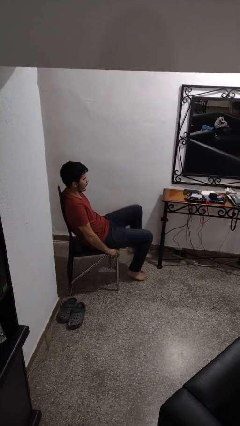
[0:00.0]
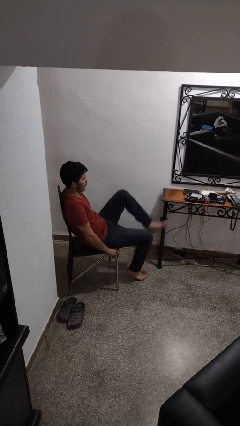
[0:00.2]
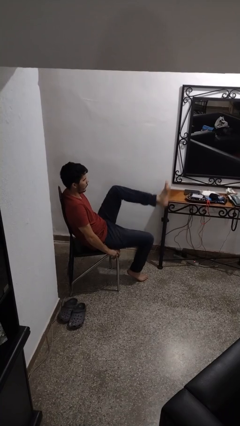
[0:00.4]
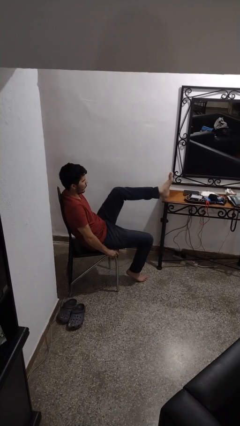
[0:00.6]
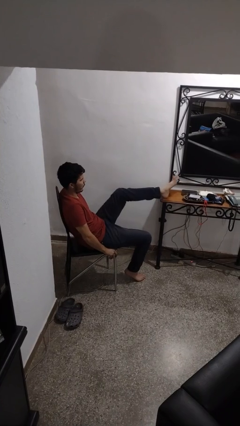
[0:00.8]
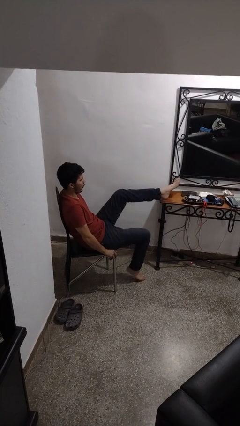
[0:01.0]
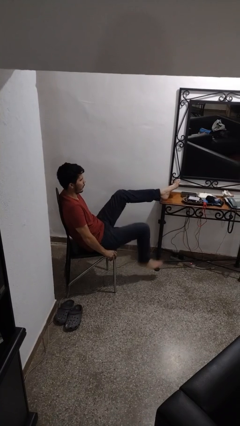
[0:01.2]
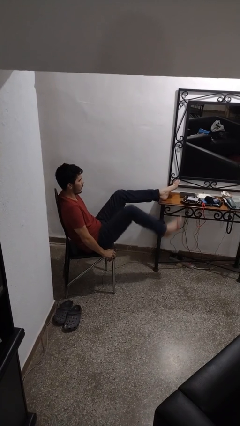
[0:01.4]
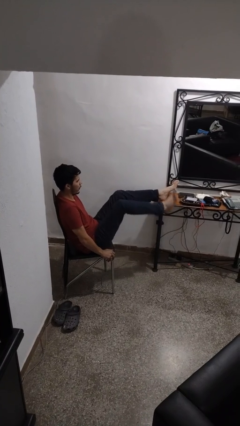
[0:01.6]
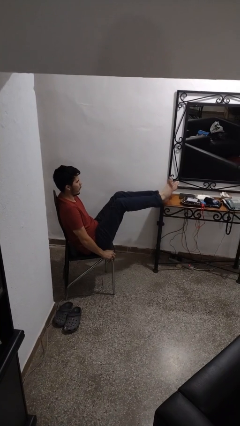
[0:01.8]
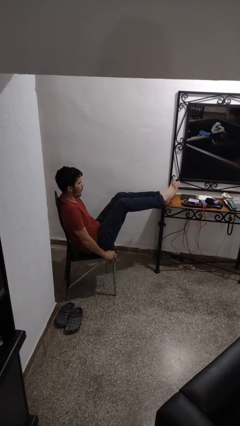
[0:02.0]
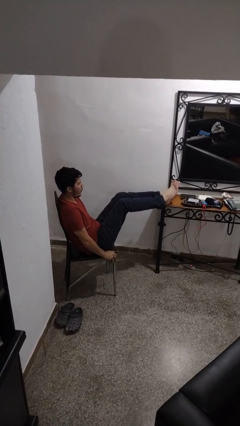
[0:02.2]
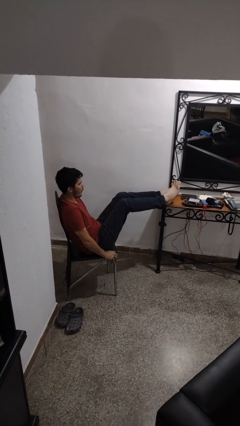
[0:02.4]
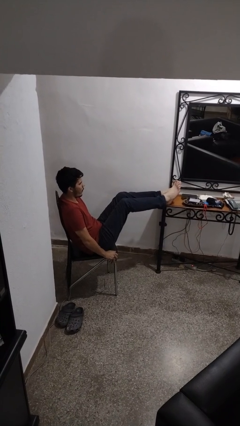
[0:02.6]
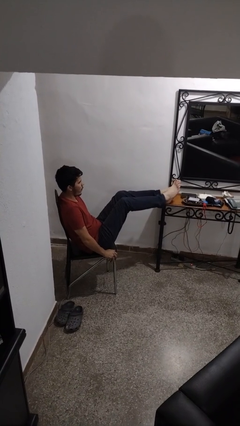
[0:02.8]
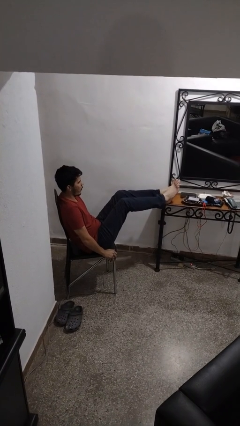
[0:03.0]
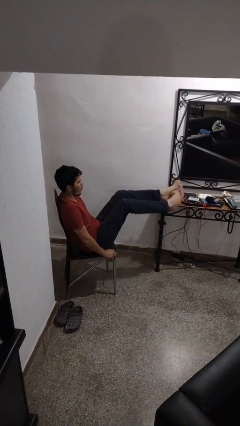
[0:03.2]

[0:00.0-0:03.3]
person puts feet up

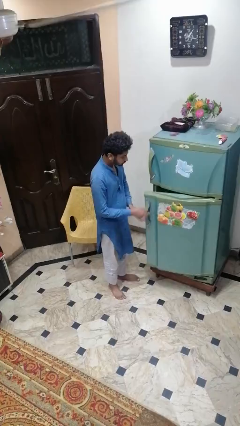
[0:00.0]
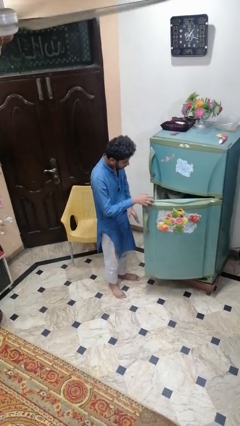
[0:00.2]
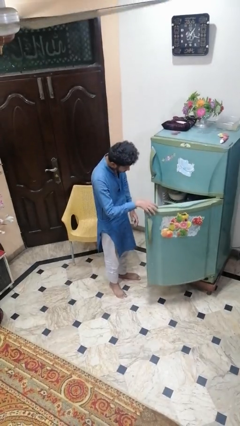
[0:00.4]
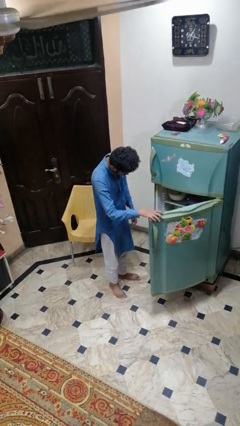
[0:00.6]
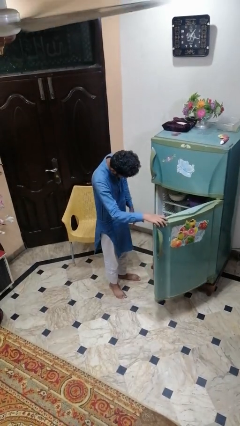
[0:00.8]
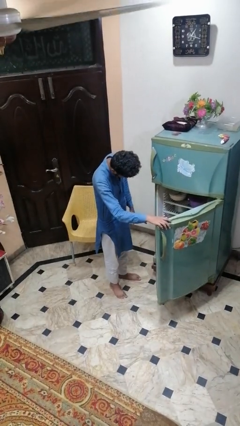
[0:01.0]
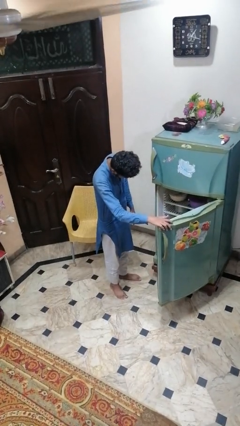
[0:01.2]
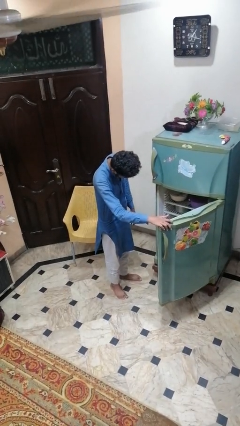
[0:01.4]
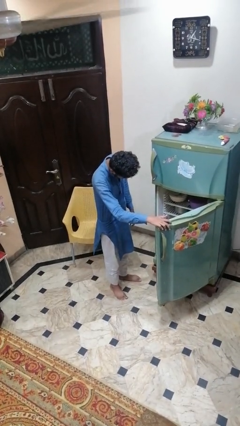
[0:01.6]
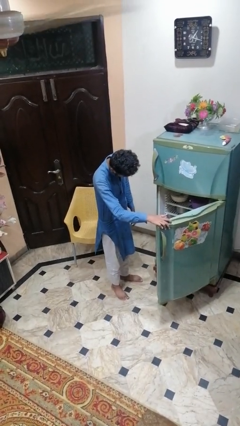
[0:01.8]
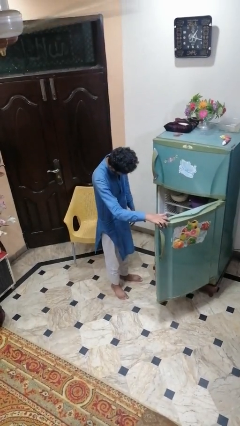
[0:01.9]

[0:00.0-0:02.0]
person opens refrigerator

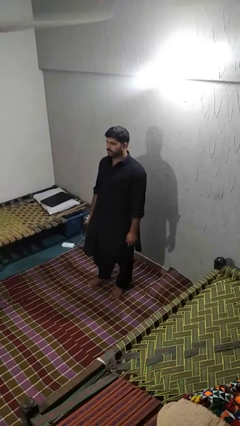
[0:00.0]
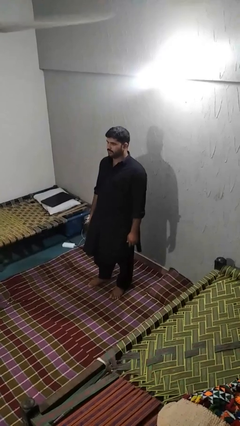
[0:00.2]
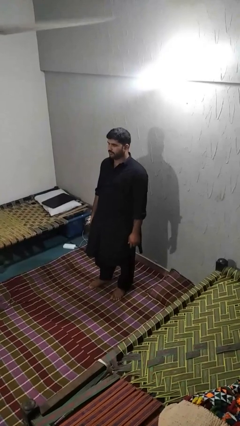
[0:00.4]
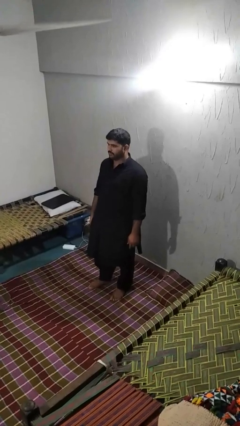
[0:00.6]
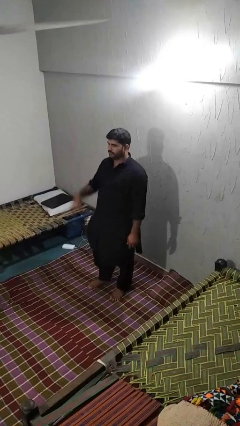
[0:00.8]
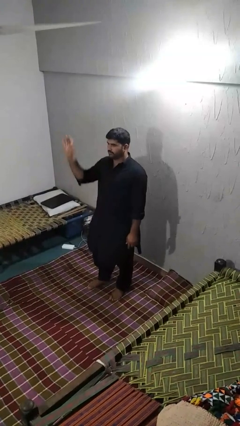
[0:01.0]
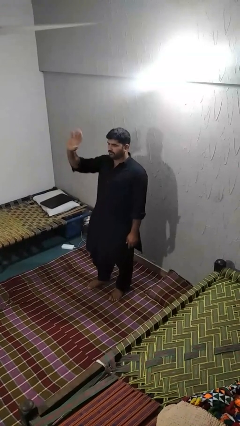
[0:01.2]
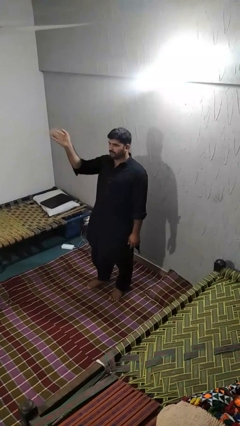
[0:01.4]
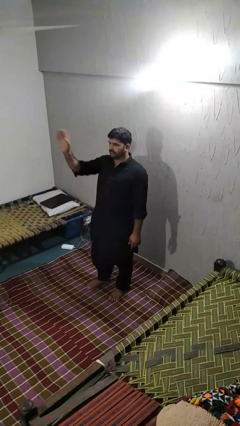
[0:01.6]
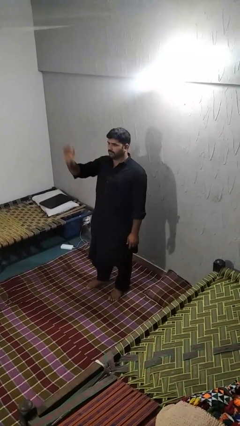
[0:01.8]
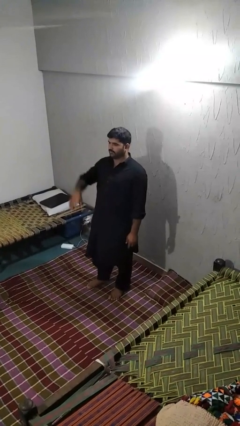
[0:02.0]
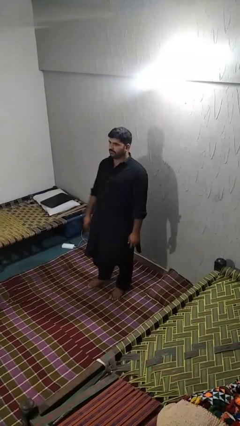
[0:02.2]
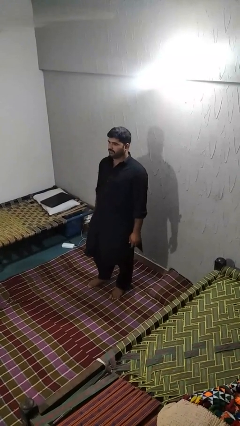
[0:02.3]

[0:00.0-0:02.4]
person waves at person

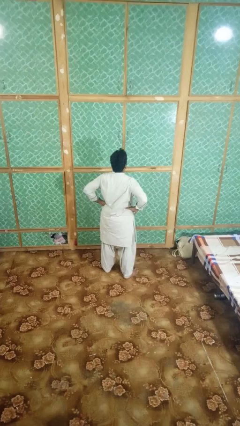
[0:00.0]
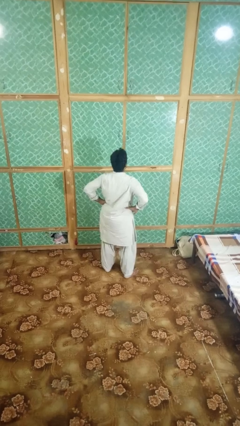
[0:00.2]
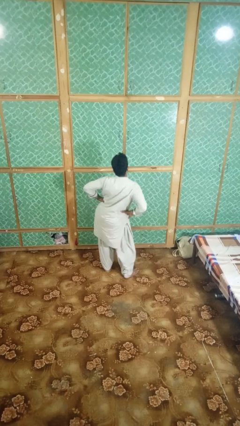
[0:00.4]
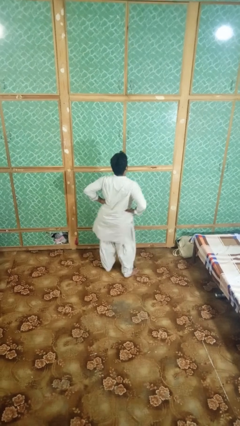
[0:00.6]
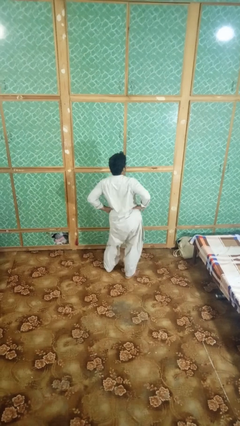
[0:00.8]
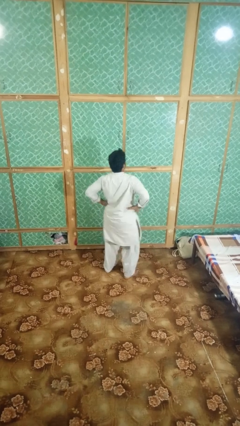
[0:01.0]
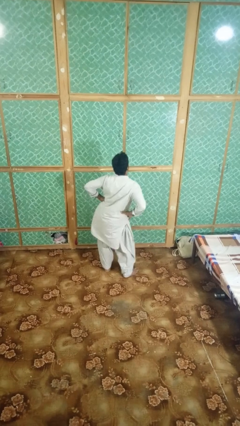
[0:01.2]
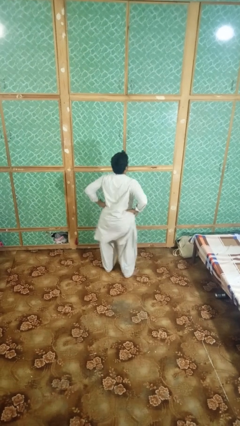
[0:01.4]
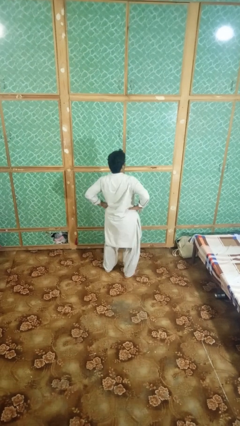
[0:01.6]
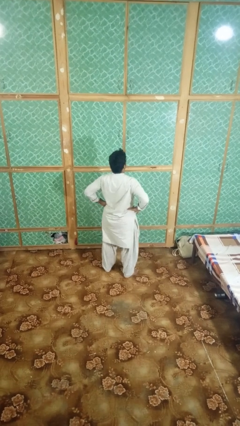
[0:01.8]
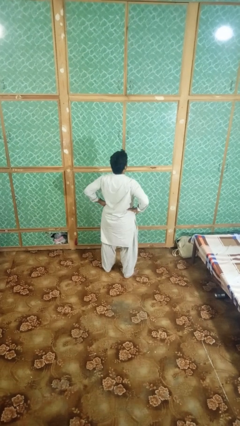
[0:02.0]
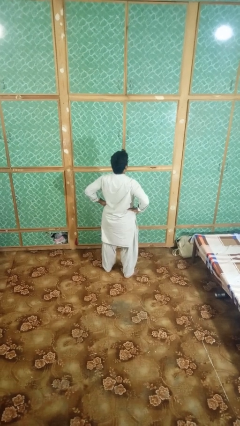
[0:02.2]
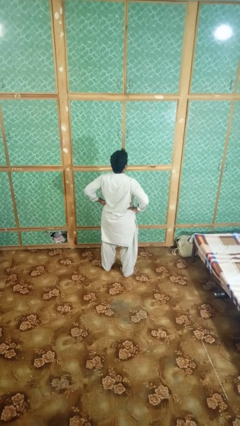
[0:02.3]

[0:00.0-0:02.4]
person wiggles hips

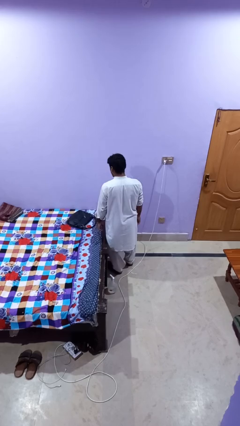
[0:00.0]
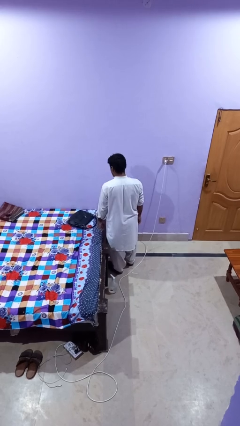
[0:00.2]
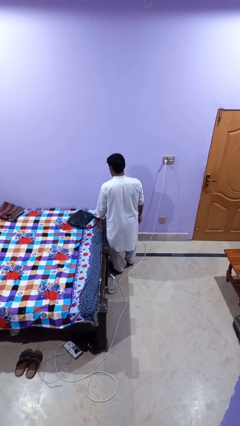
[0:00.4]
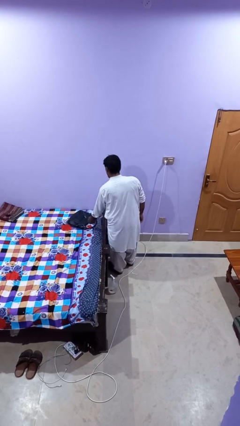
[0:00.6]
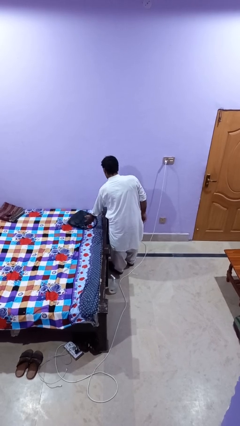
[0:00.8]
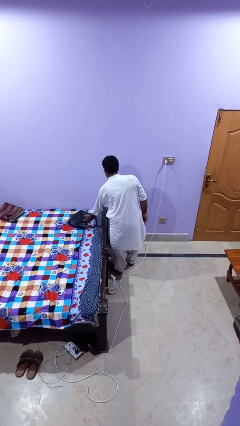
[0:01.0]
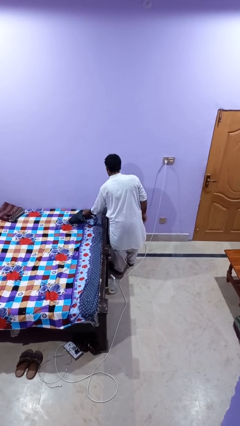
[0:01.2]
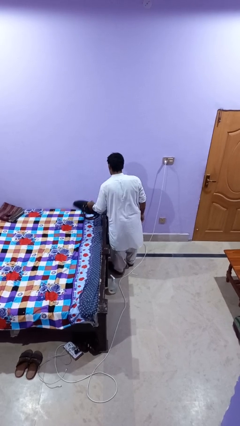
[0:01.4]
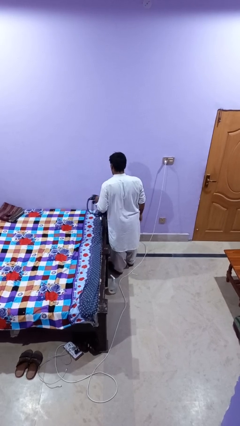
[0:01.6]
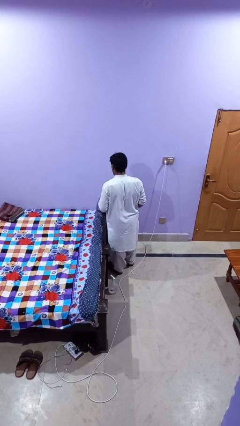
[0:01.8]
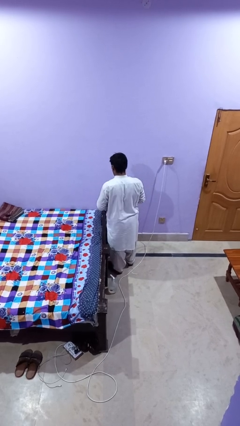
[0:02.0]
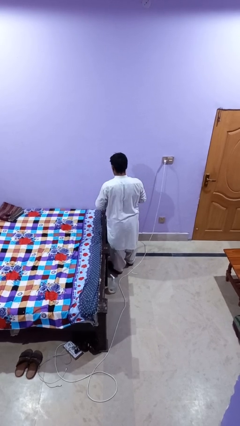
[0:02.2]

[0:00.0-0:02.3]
person picks up object from bed

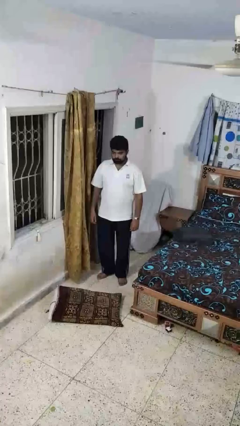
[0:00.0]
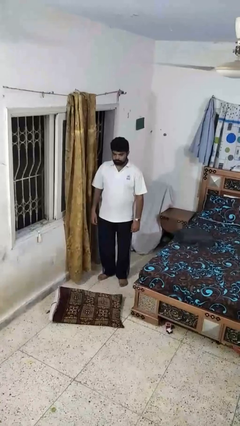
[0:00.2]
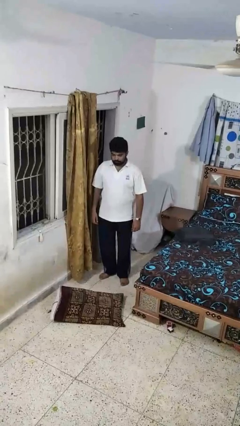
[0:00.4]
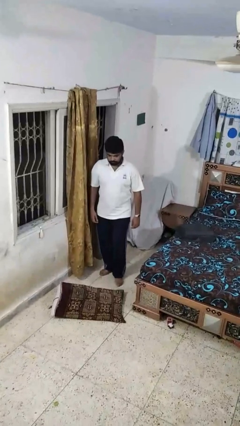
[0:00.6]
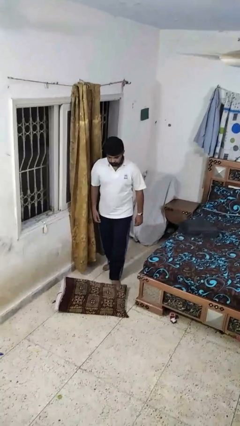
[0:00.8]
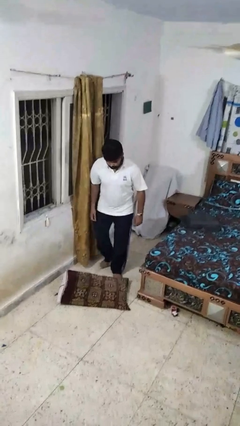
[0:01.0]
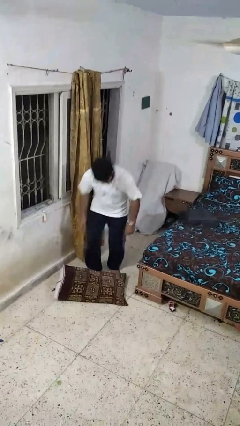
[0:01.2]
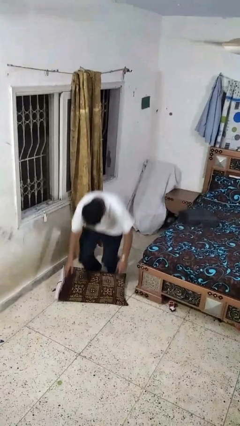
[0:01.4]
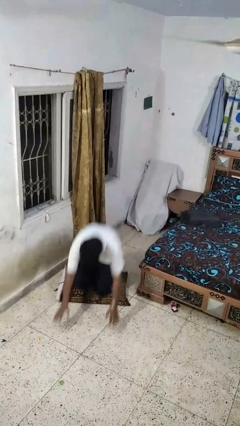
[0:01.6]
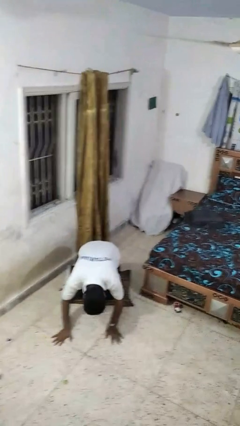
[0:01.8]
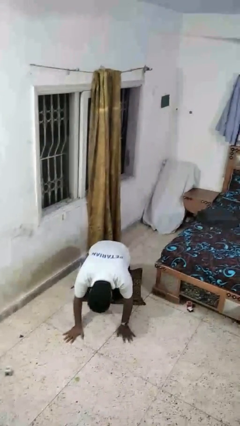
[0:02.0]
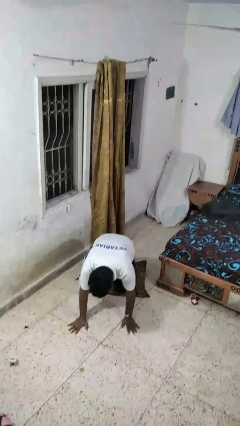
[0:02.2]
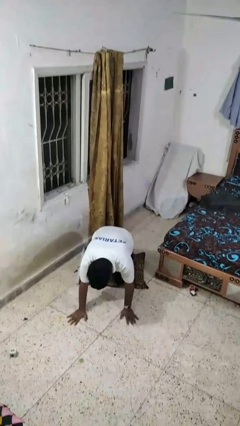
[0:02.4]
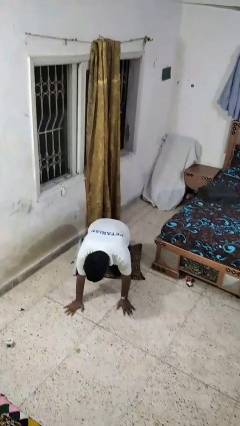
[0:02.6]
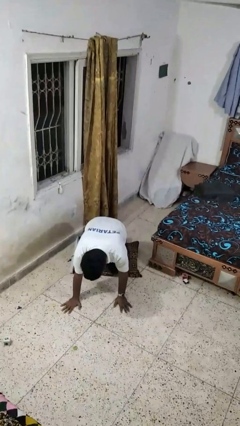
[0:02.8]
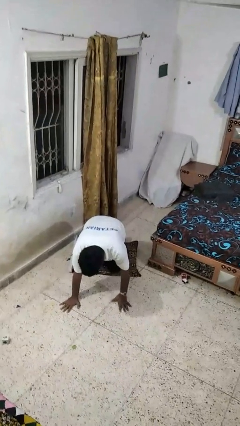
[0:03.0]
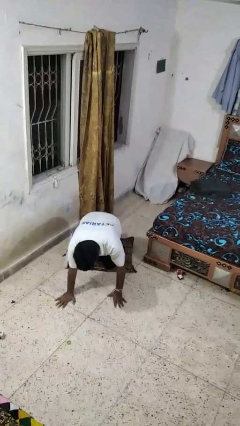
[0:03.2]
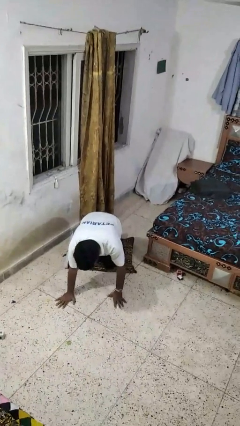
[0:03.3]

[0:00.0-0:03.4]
person trips on object on floor

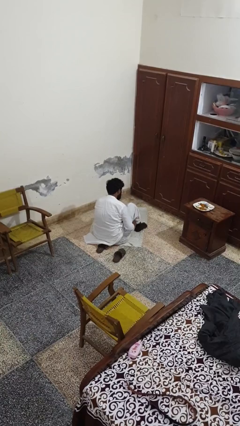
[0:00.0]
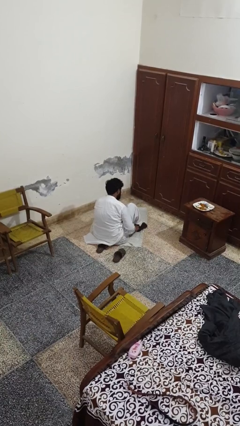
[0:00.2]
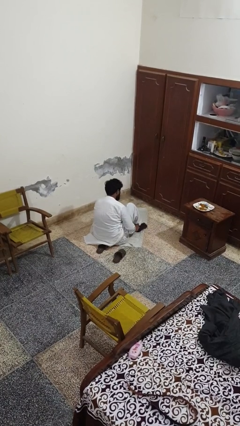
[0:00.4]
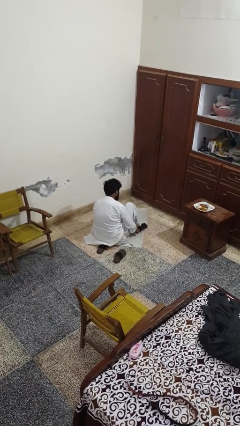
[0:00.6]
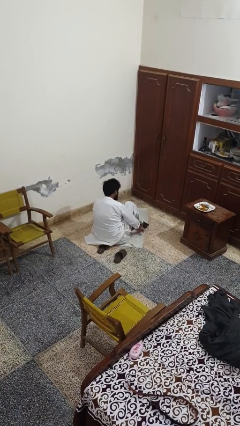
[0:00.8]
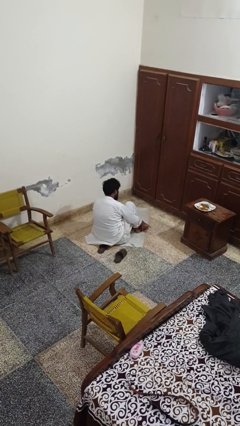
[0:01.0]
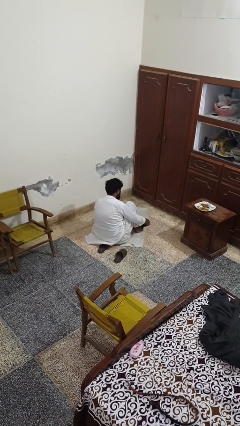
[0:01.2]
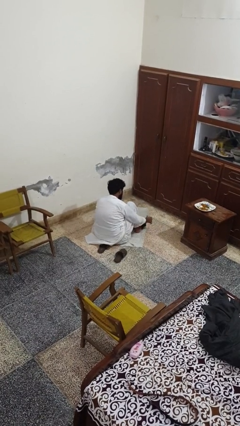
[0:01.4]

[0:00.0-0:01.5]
person takes off socks
